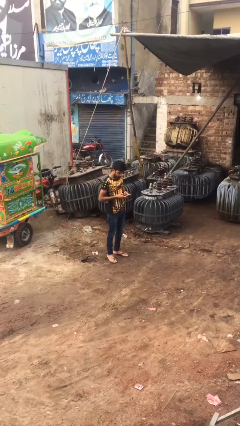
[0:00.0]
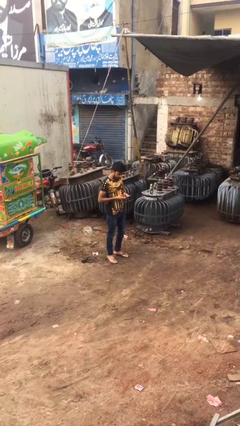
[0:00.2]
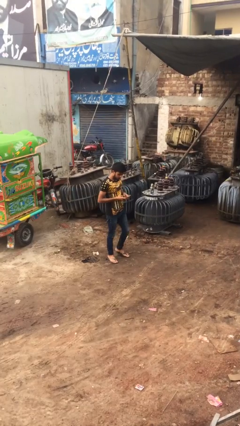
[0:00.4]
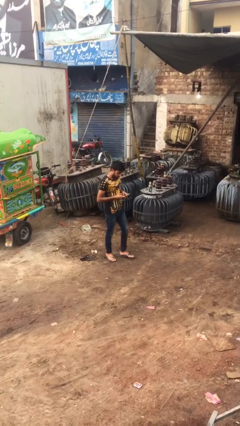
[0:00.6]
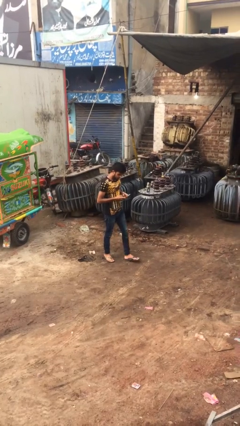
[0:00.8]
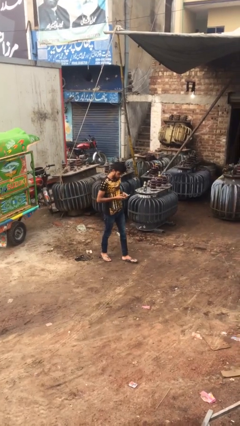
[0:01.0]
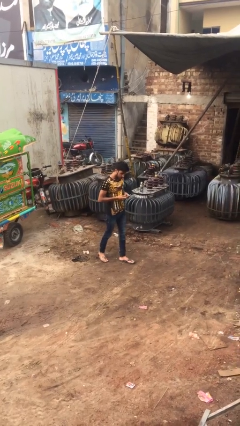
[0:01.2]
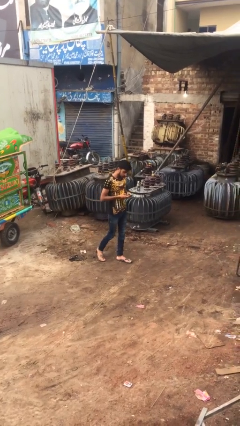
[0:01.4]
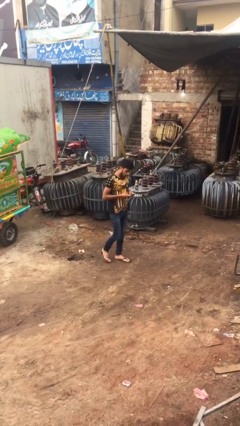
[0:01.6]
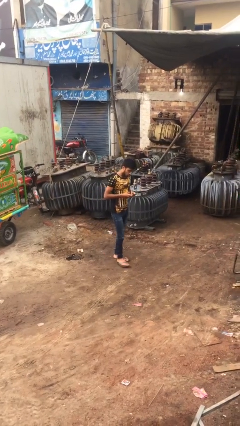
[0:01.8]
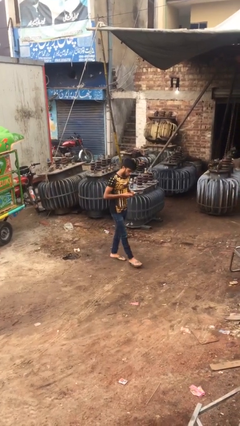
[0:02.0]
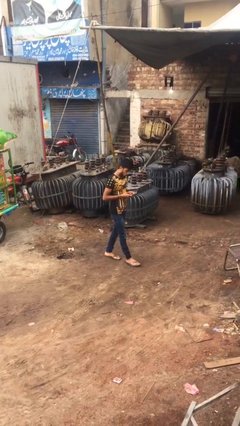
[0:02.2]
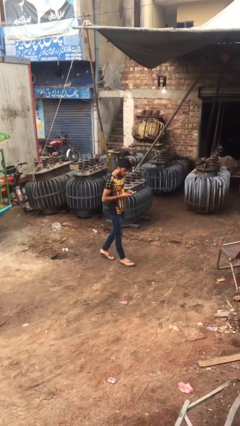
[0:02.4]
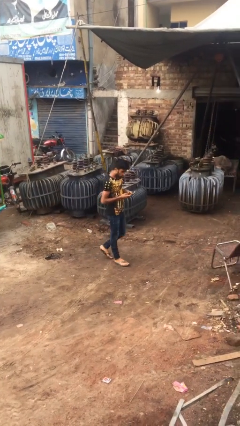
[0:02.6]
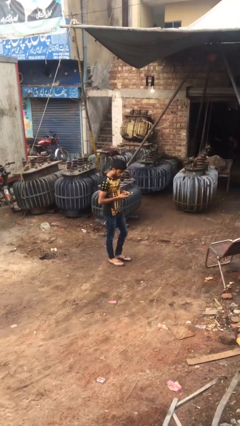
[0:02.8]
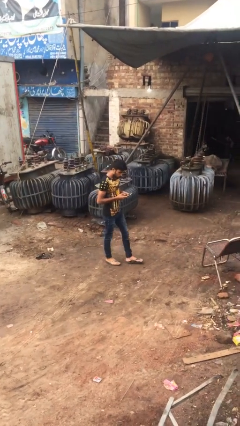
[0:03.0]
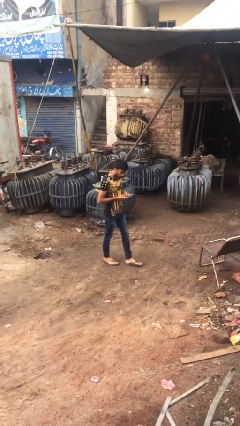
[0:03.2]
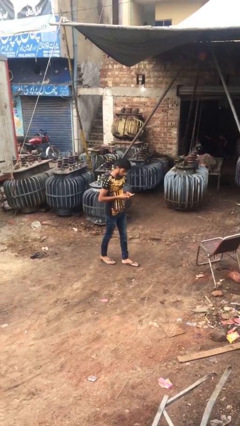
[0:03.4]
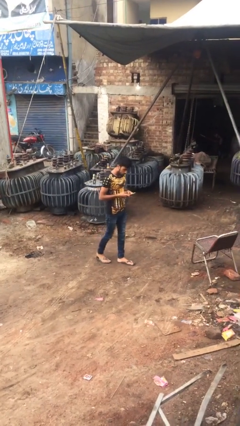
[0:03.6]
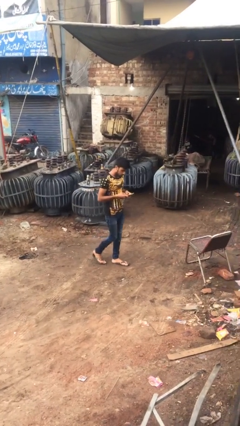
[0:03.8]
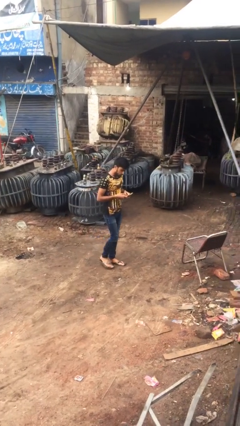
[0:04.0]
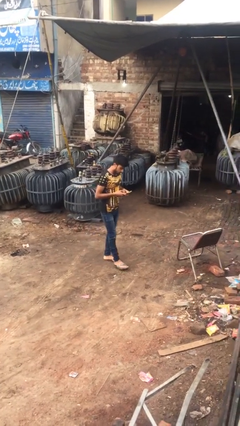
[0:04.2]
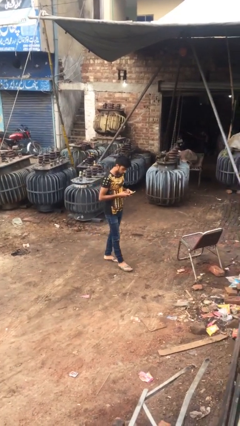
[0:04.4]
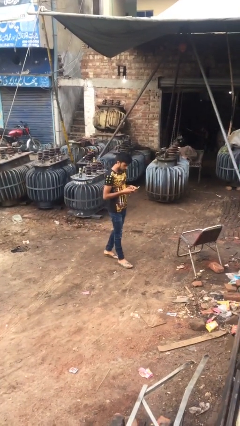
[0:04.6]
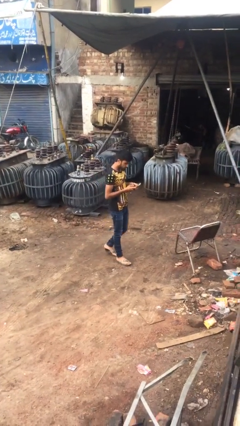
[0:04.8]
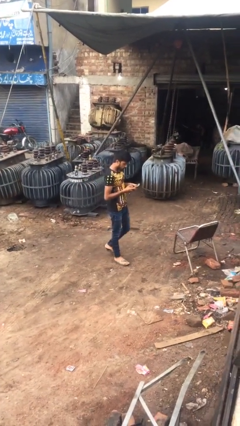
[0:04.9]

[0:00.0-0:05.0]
person texts on phone

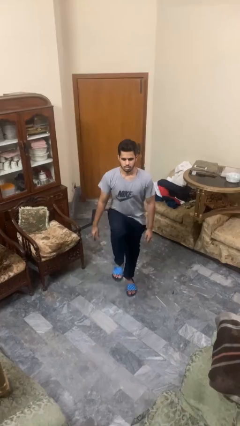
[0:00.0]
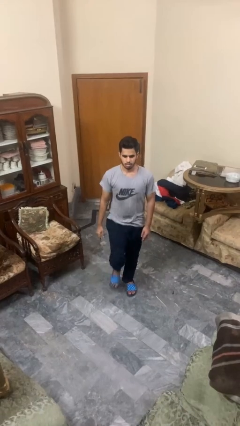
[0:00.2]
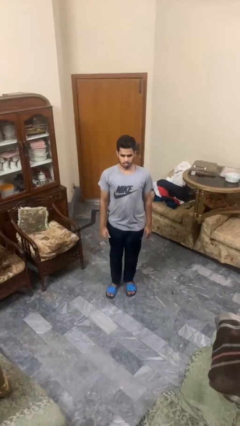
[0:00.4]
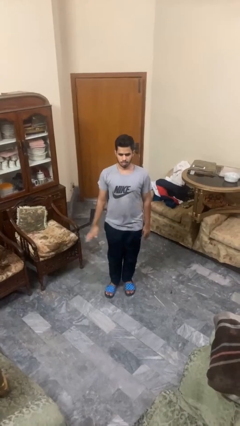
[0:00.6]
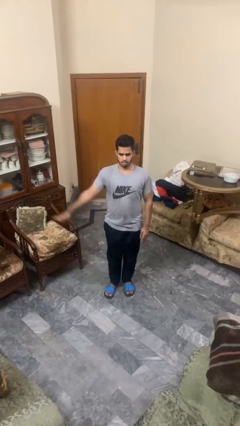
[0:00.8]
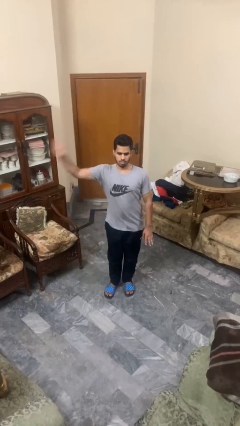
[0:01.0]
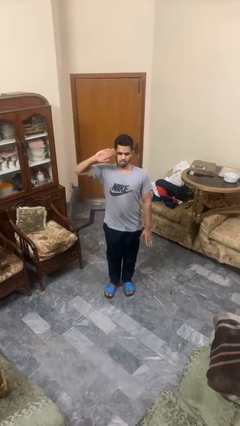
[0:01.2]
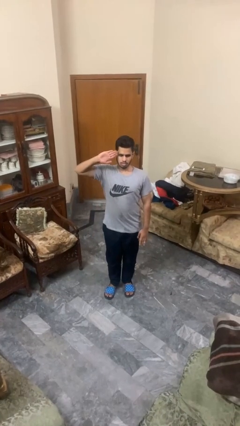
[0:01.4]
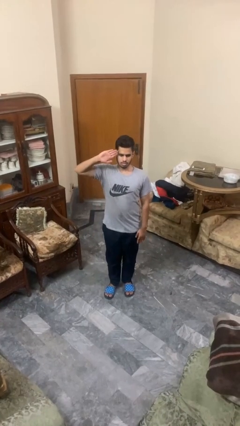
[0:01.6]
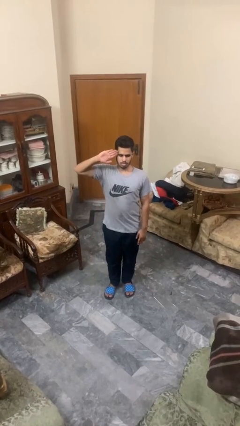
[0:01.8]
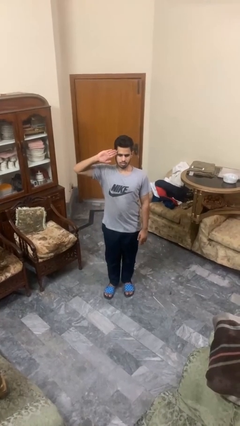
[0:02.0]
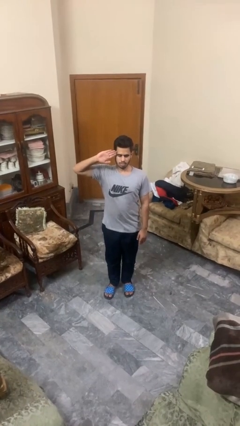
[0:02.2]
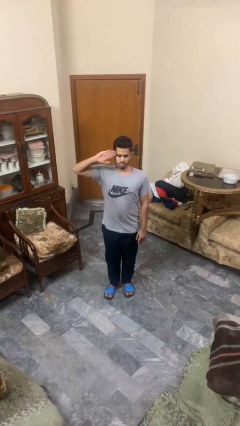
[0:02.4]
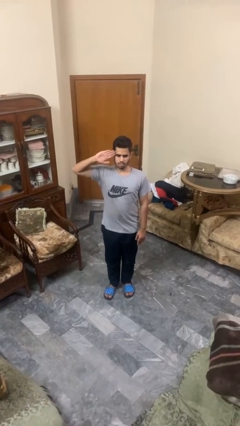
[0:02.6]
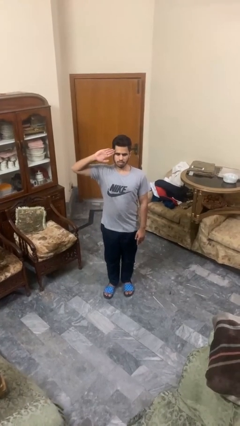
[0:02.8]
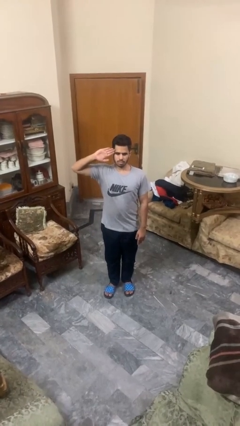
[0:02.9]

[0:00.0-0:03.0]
person salutes

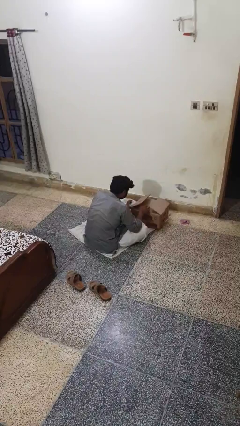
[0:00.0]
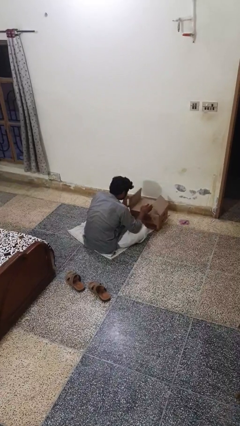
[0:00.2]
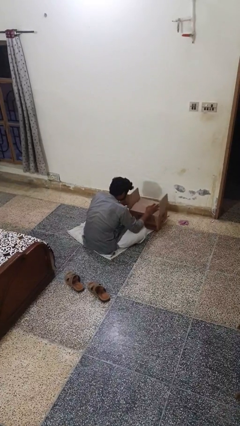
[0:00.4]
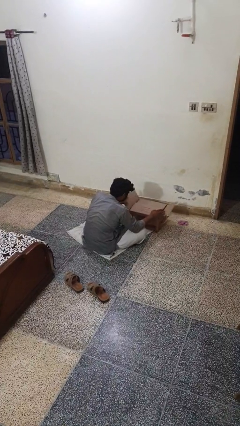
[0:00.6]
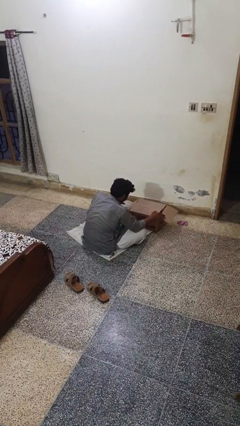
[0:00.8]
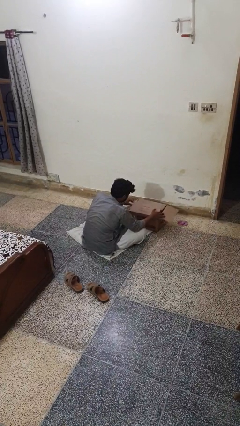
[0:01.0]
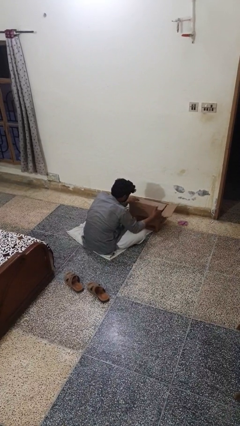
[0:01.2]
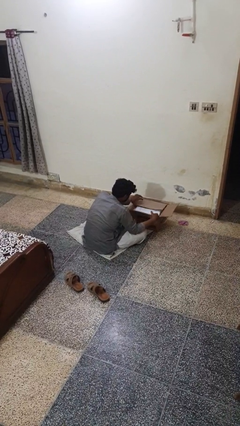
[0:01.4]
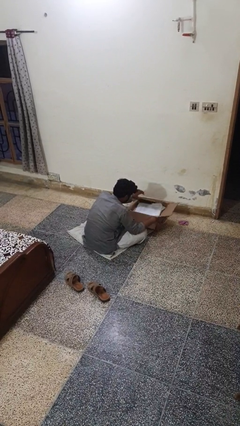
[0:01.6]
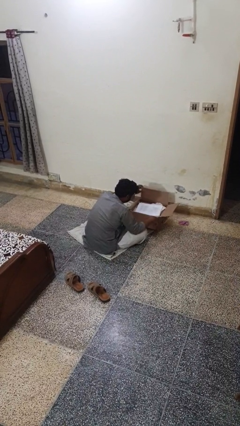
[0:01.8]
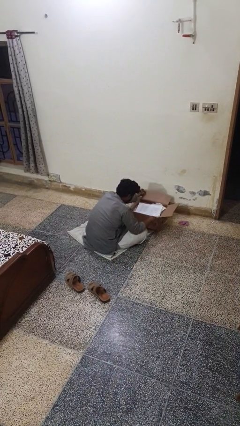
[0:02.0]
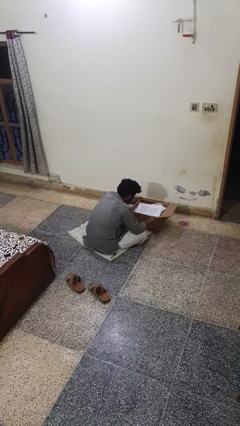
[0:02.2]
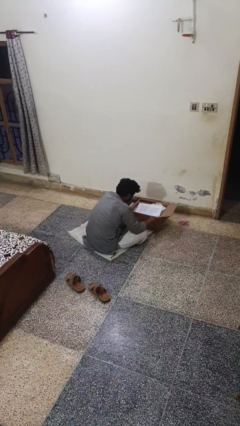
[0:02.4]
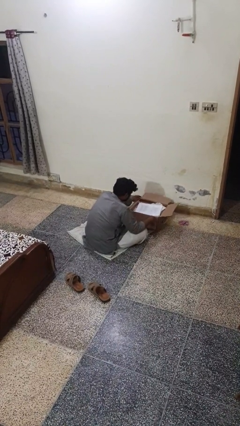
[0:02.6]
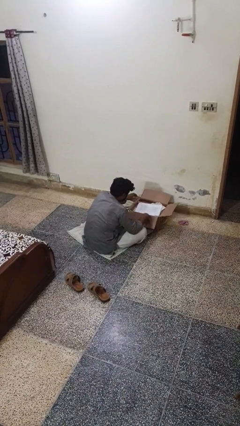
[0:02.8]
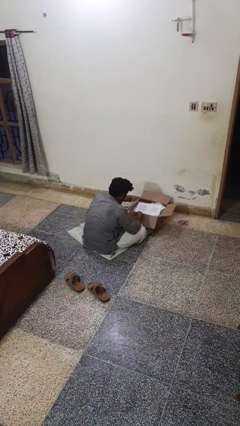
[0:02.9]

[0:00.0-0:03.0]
person opens box

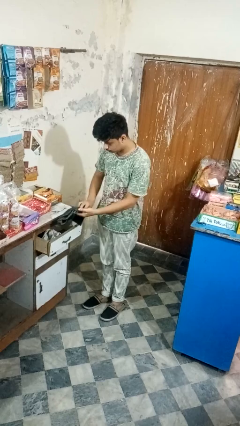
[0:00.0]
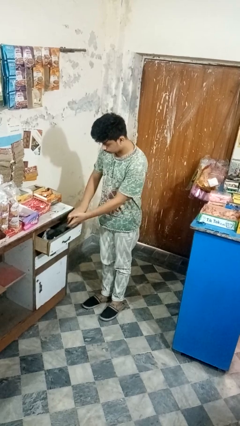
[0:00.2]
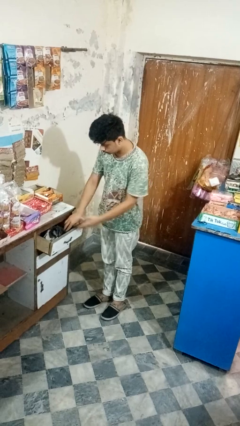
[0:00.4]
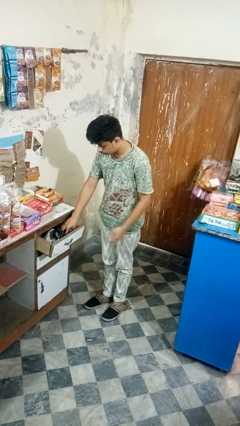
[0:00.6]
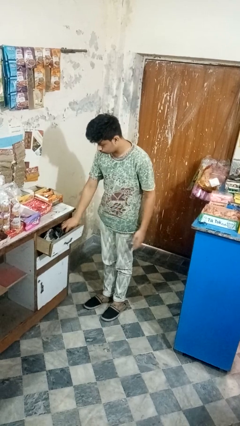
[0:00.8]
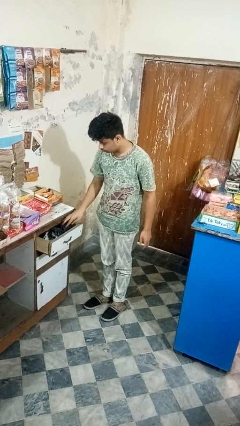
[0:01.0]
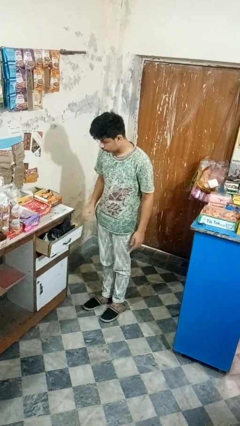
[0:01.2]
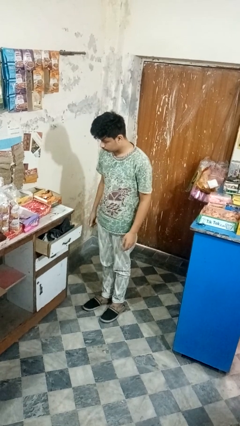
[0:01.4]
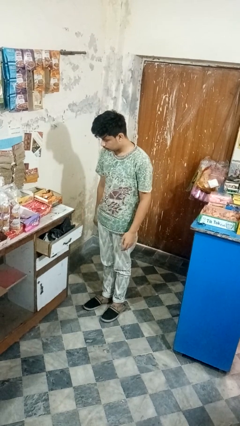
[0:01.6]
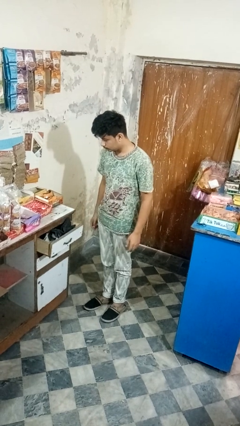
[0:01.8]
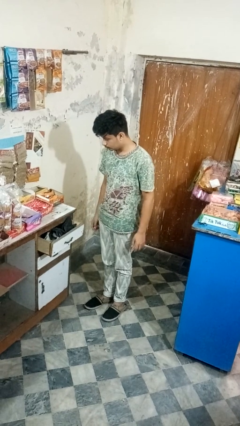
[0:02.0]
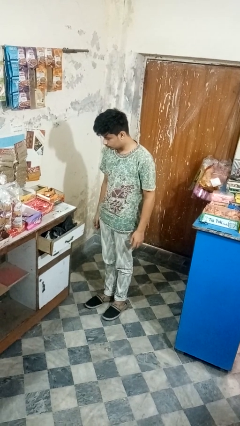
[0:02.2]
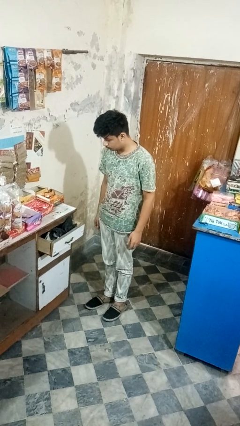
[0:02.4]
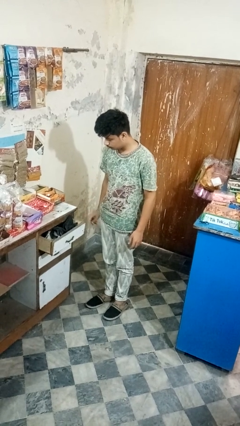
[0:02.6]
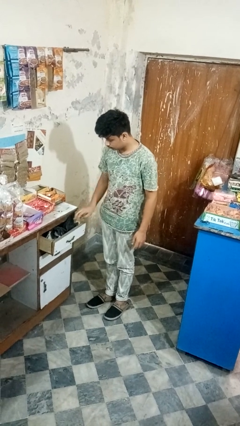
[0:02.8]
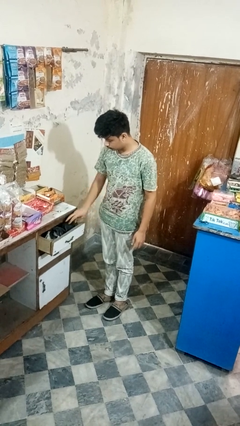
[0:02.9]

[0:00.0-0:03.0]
person puts clothes into dresser

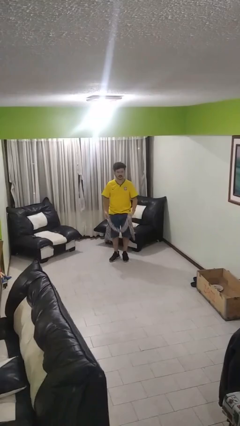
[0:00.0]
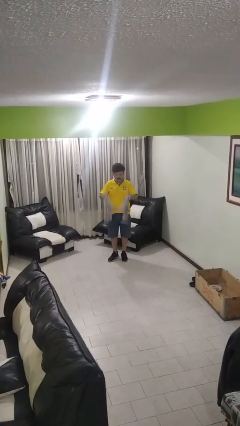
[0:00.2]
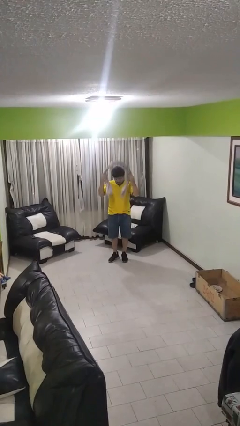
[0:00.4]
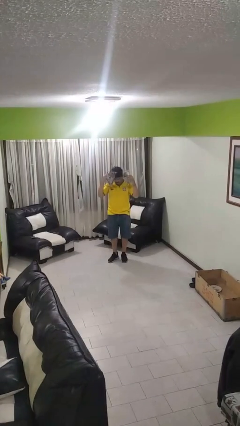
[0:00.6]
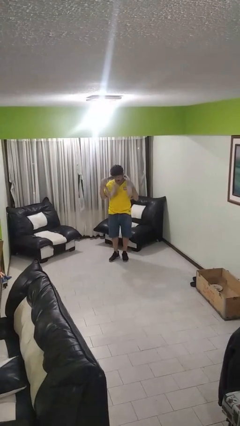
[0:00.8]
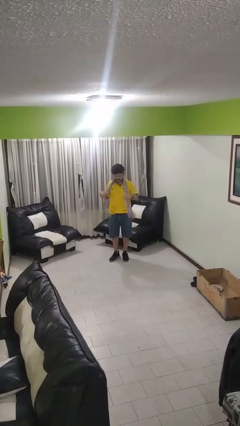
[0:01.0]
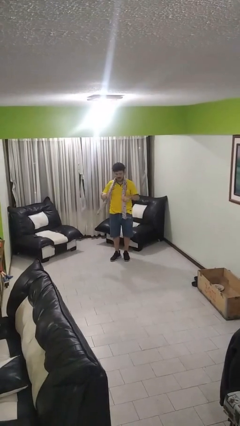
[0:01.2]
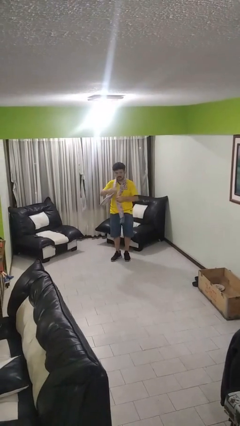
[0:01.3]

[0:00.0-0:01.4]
person puts on scarf

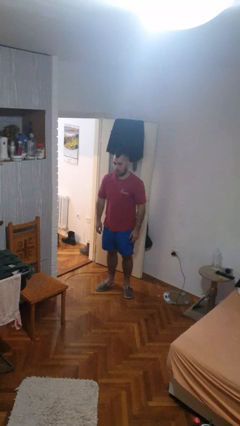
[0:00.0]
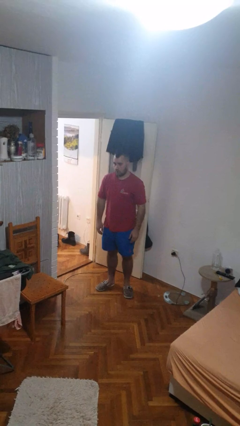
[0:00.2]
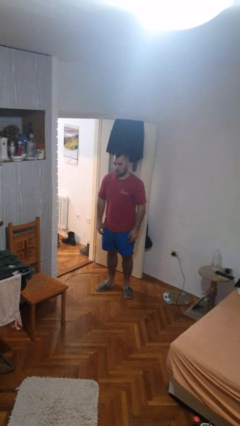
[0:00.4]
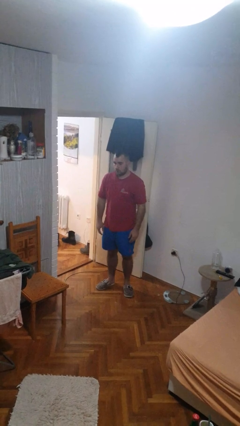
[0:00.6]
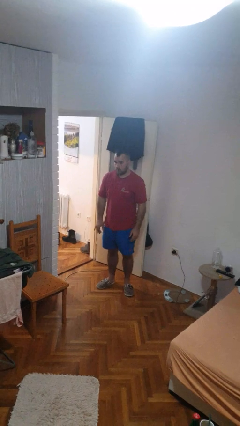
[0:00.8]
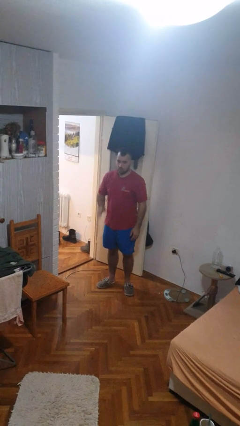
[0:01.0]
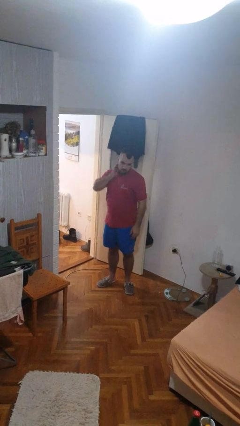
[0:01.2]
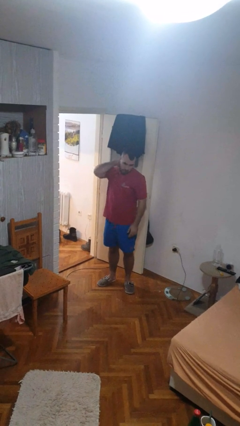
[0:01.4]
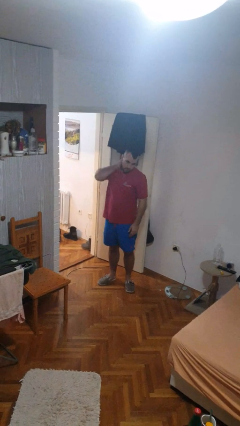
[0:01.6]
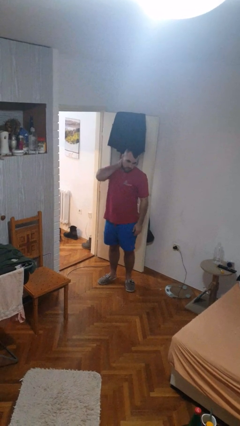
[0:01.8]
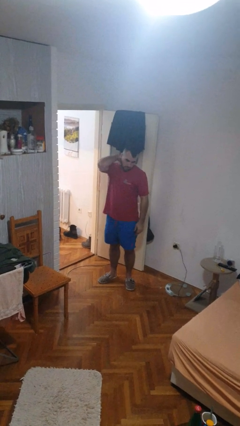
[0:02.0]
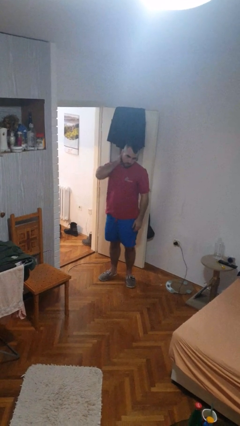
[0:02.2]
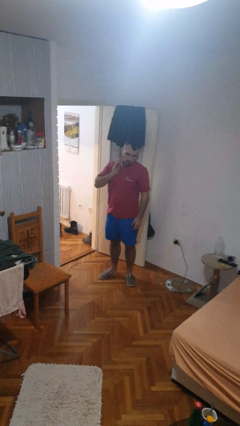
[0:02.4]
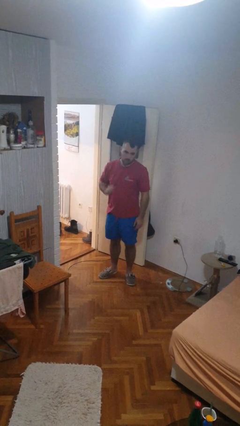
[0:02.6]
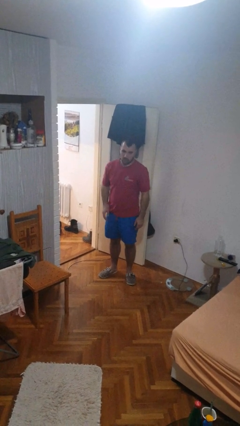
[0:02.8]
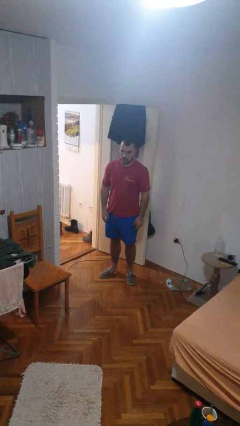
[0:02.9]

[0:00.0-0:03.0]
person rubs neck
